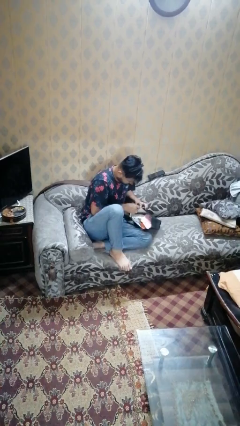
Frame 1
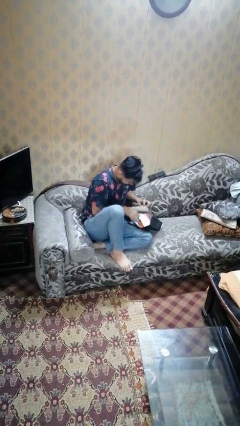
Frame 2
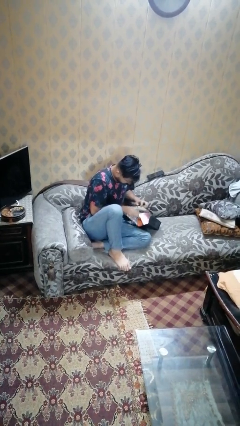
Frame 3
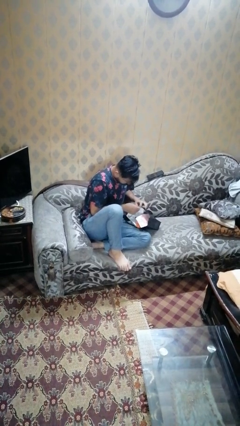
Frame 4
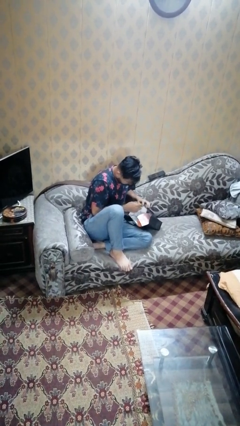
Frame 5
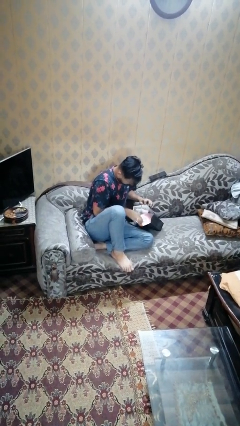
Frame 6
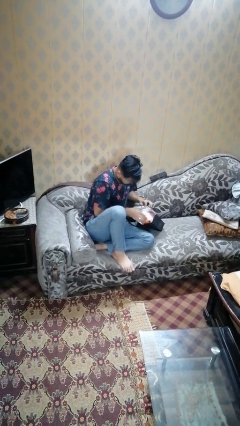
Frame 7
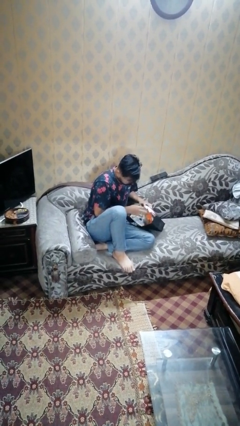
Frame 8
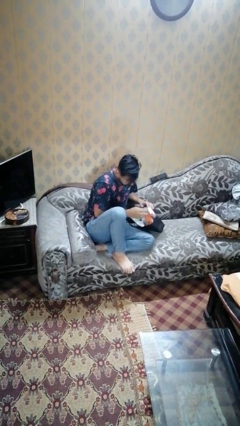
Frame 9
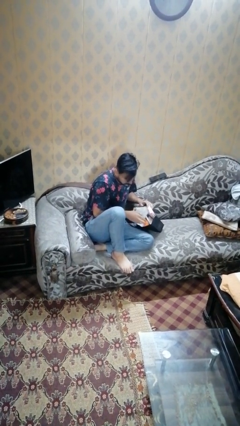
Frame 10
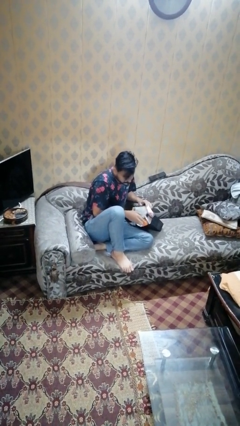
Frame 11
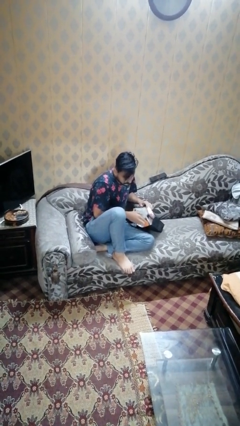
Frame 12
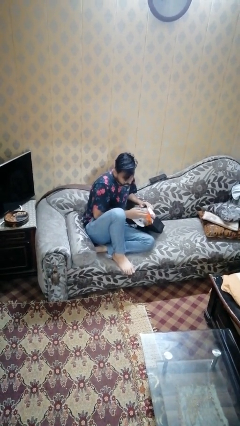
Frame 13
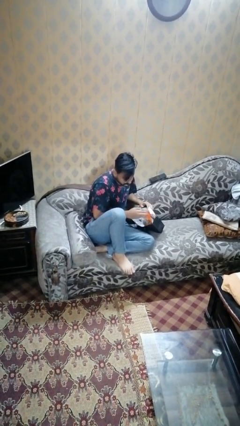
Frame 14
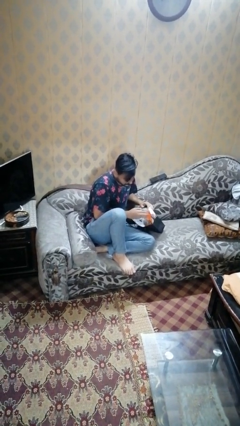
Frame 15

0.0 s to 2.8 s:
person searches in bag

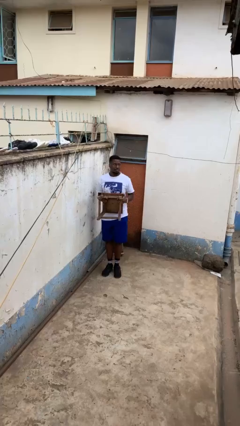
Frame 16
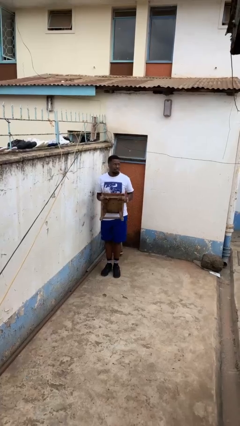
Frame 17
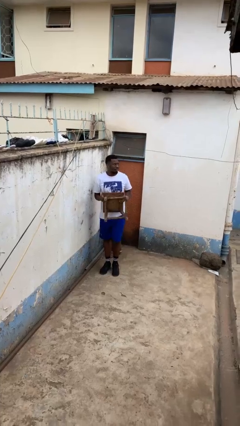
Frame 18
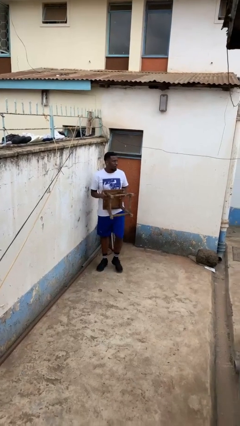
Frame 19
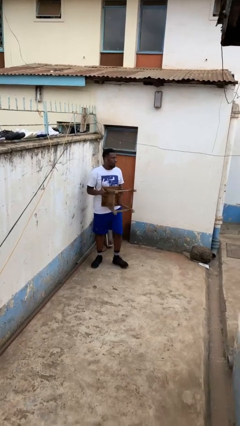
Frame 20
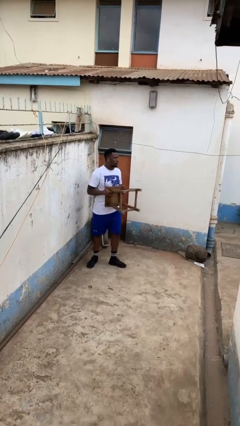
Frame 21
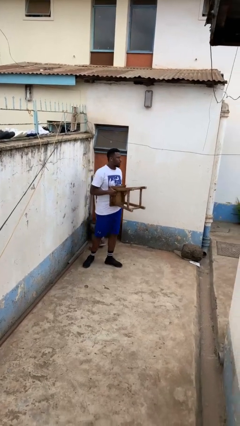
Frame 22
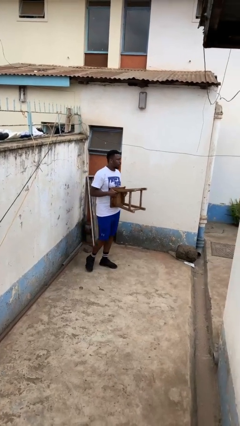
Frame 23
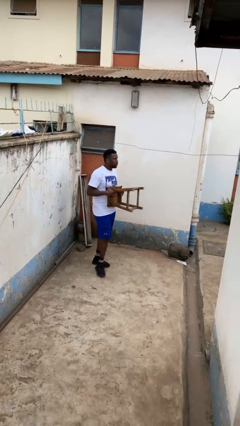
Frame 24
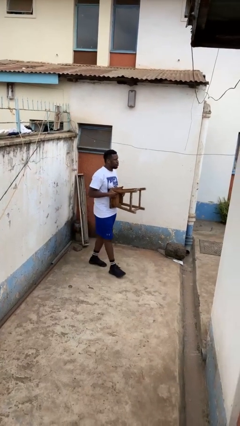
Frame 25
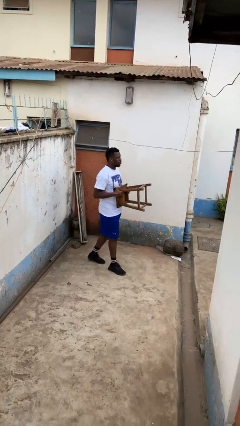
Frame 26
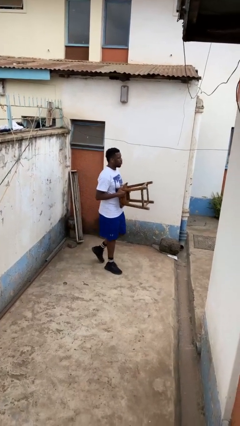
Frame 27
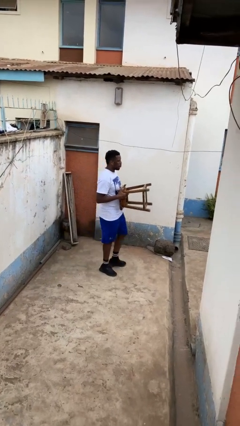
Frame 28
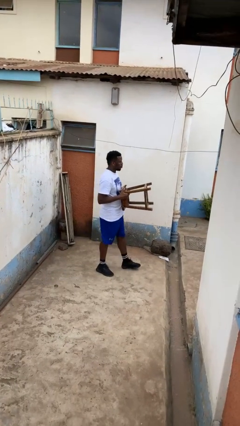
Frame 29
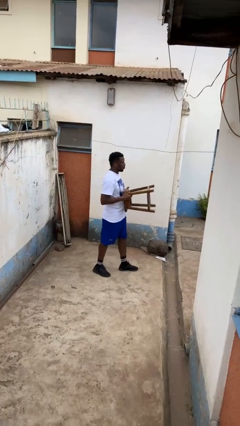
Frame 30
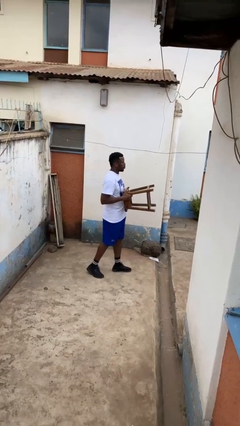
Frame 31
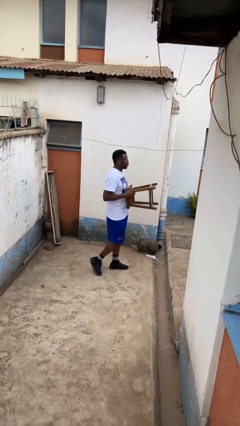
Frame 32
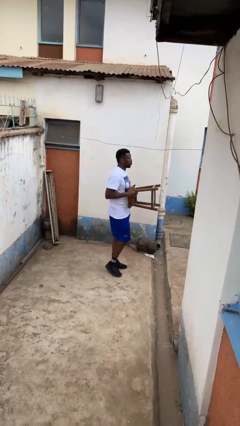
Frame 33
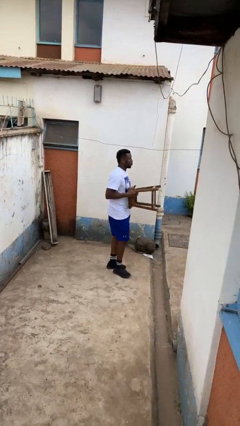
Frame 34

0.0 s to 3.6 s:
person carries furniture

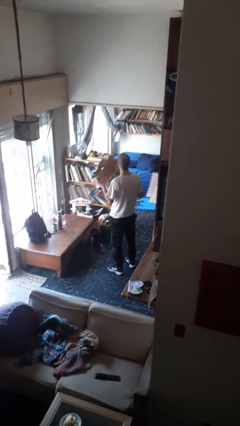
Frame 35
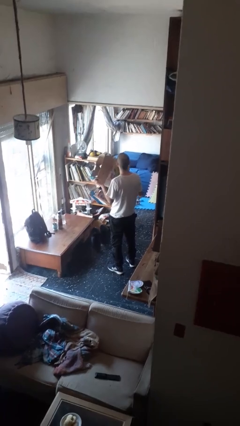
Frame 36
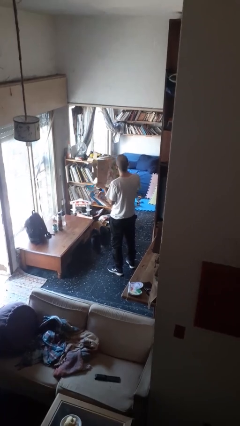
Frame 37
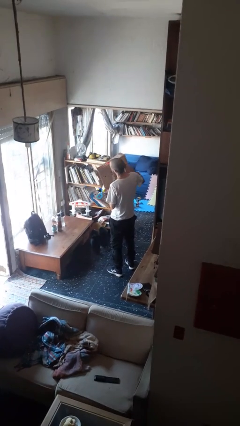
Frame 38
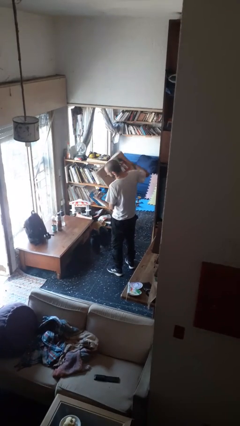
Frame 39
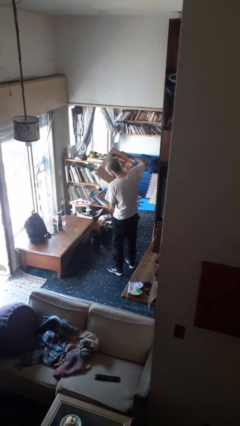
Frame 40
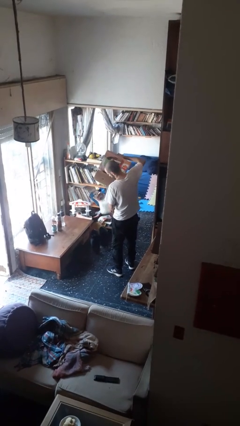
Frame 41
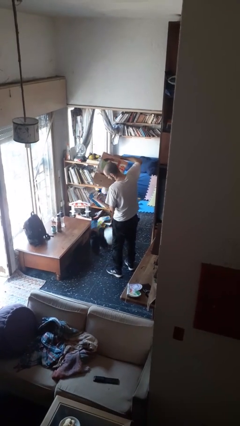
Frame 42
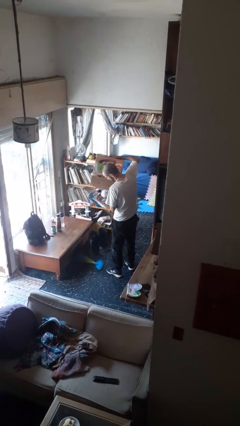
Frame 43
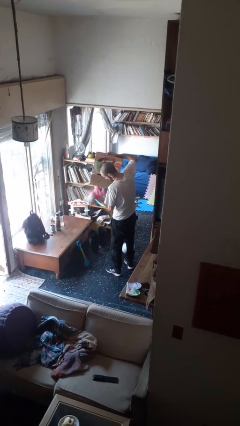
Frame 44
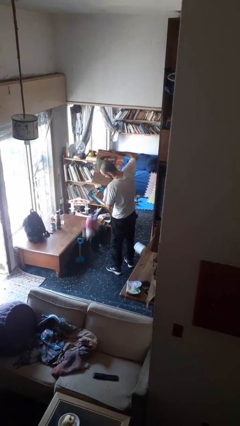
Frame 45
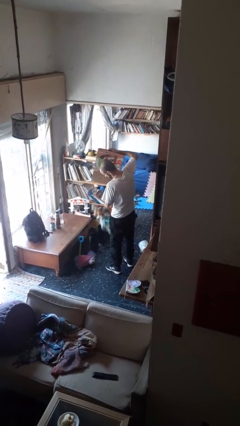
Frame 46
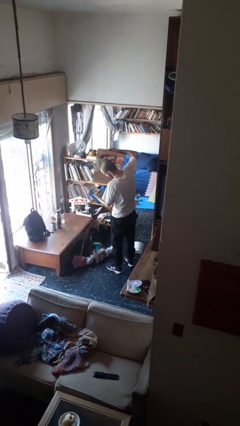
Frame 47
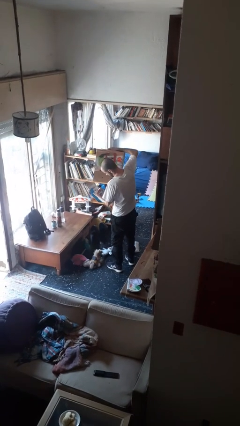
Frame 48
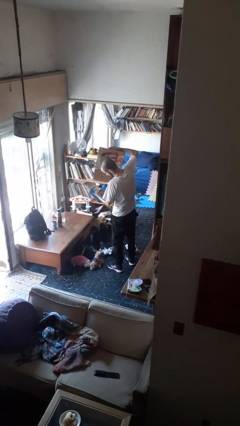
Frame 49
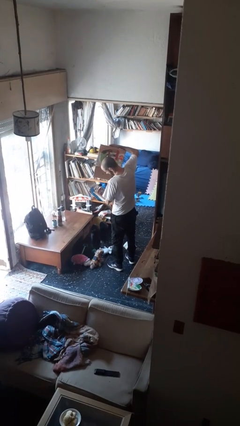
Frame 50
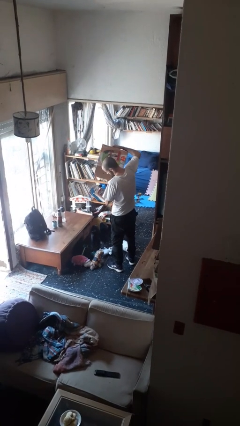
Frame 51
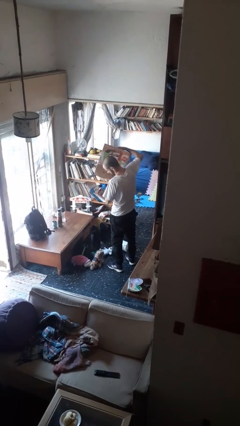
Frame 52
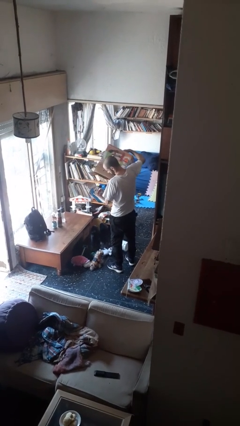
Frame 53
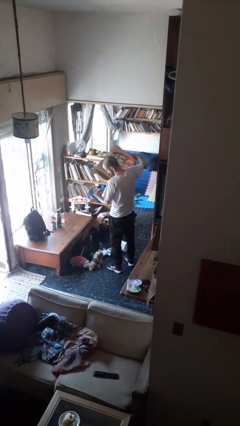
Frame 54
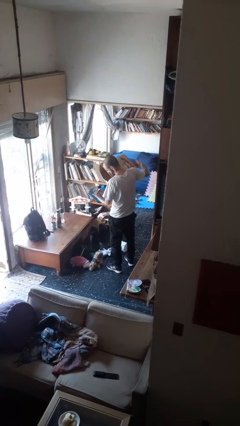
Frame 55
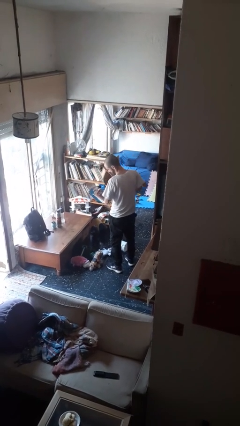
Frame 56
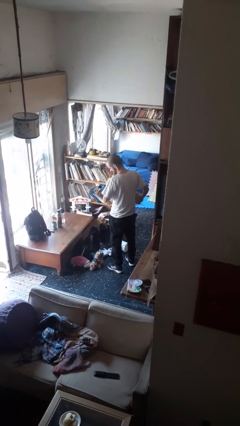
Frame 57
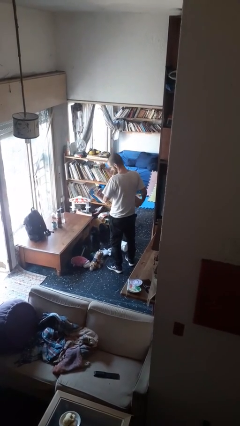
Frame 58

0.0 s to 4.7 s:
person unloads box onto floor

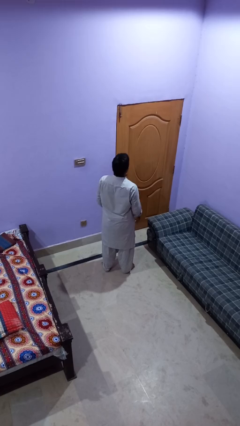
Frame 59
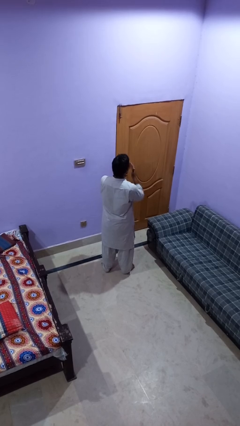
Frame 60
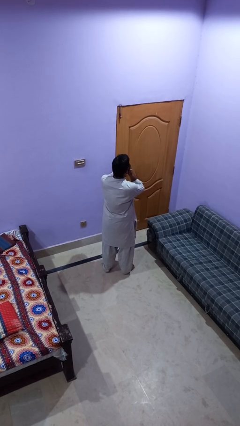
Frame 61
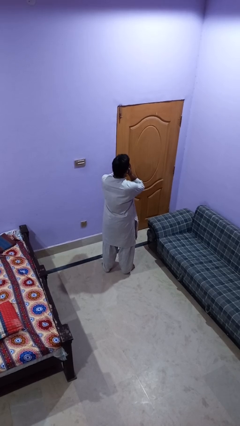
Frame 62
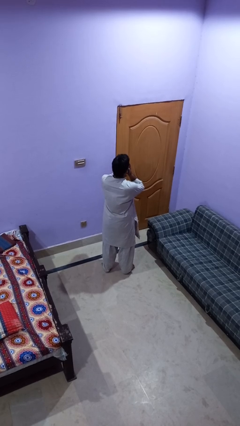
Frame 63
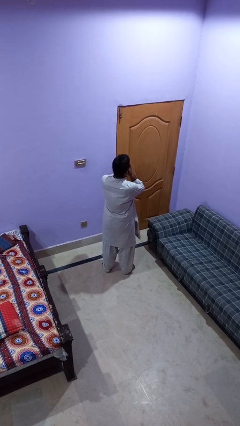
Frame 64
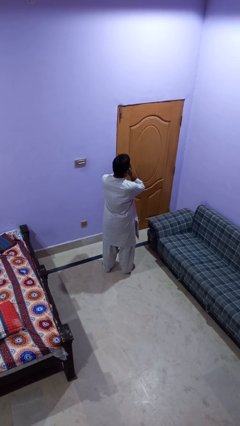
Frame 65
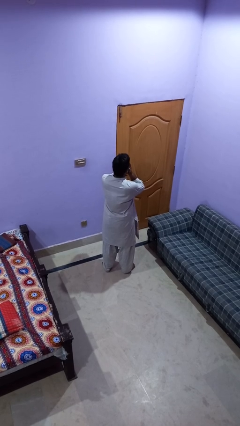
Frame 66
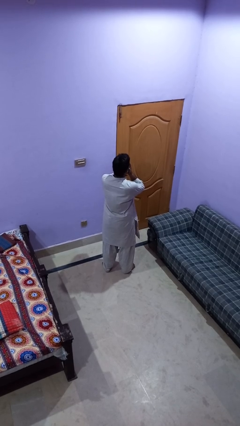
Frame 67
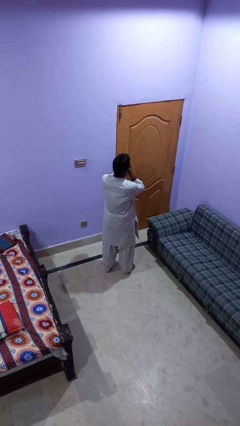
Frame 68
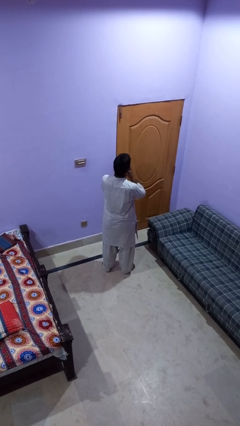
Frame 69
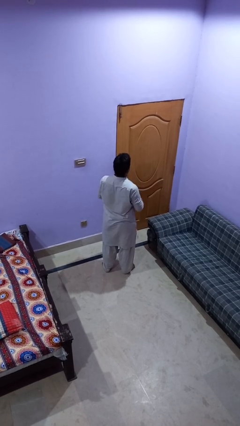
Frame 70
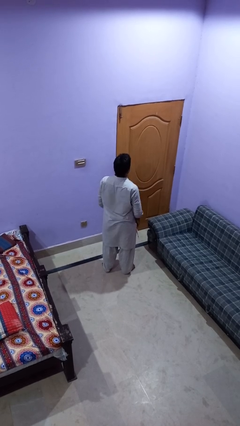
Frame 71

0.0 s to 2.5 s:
person covers face with hands

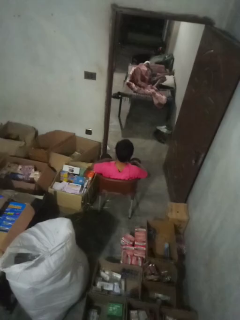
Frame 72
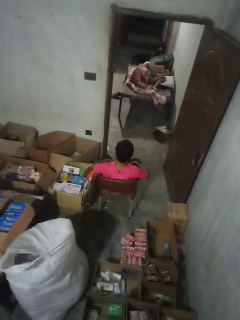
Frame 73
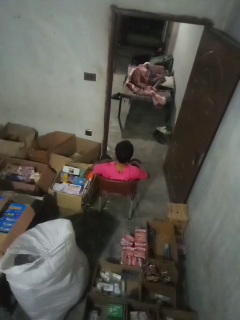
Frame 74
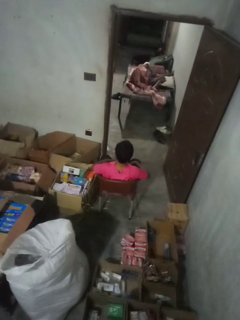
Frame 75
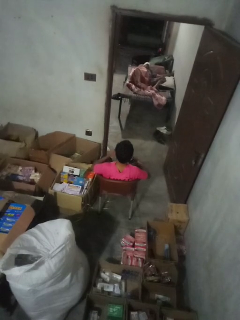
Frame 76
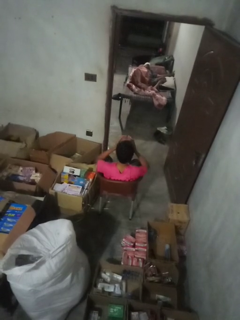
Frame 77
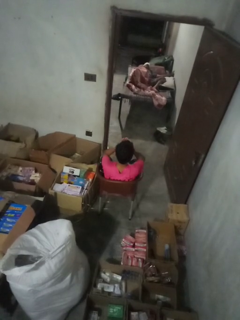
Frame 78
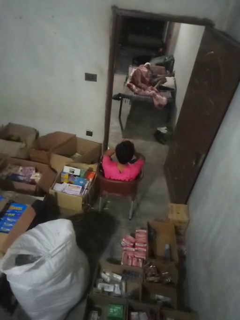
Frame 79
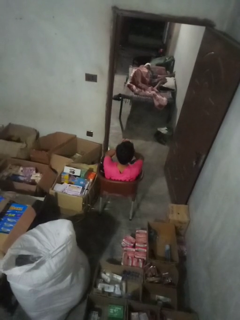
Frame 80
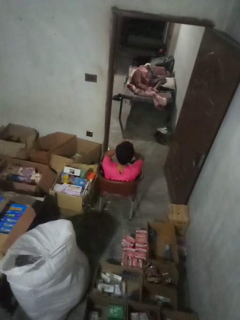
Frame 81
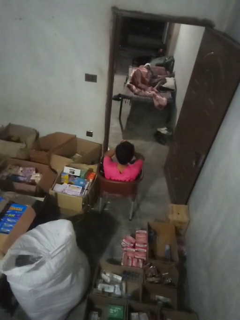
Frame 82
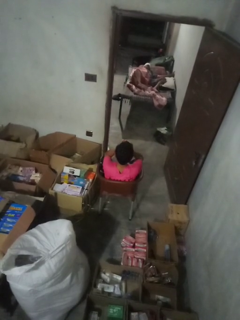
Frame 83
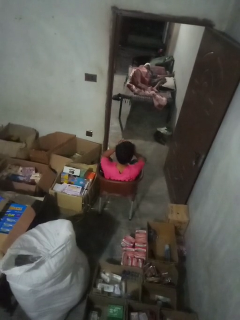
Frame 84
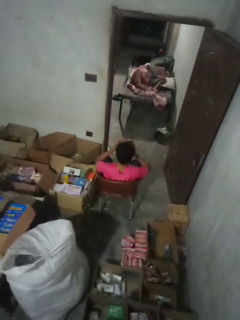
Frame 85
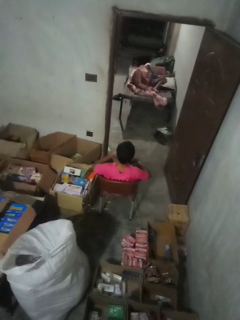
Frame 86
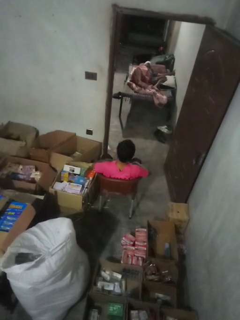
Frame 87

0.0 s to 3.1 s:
person rubs eyes

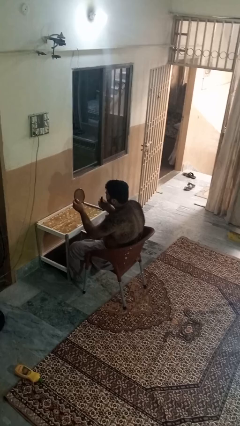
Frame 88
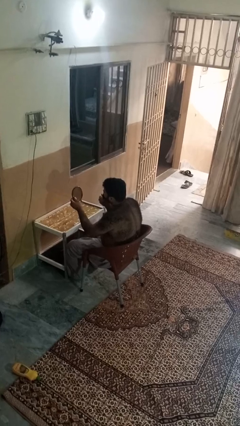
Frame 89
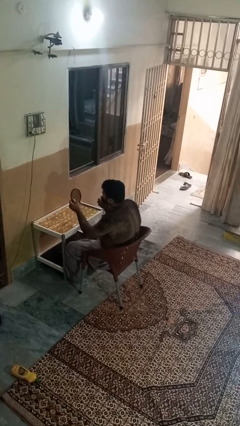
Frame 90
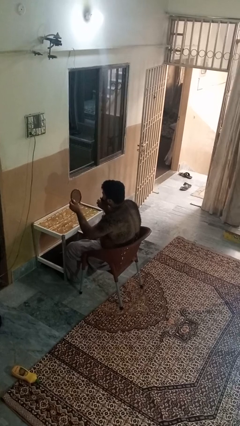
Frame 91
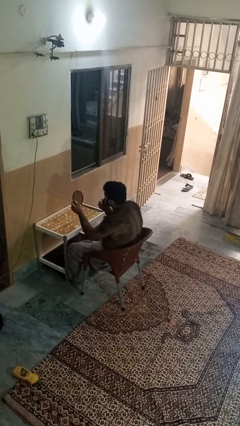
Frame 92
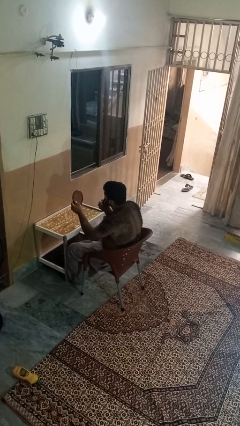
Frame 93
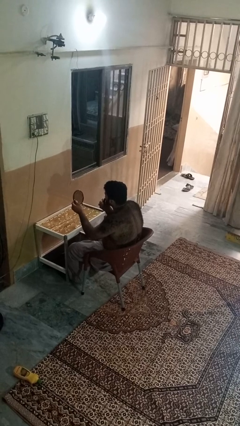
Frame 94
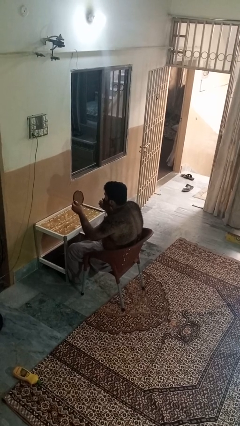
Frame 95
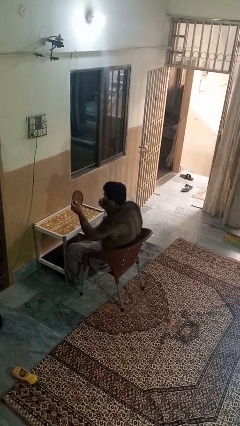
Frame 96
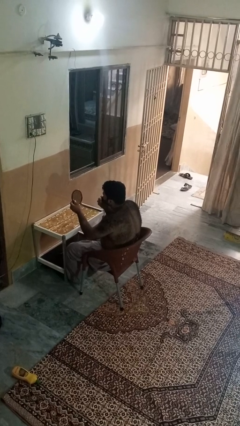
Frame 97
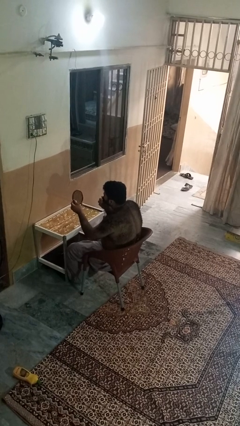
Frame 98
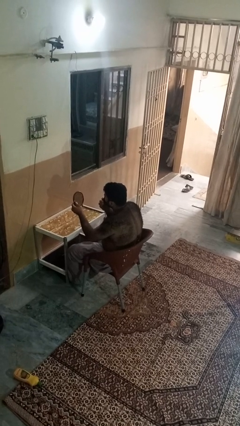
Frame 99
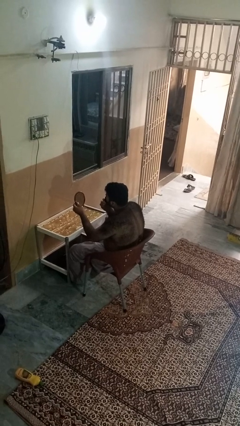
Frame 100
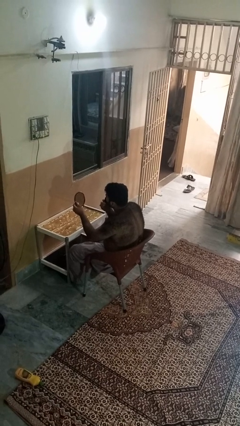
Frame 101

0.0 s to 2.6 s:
person applies lip makeup
